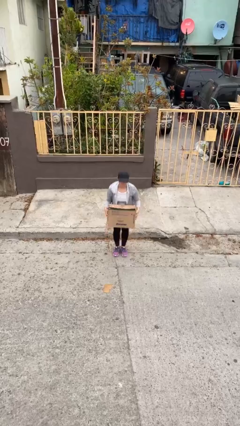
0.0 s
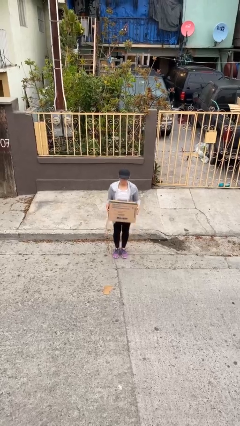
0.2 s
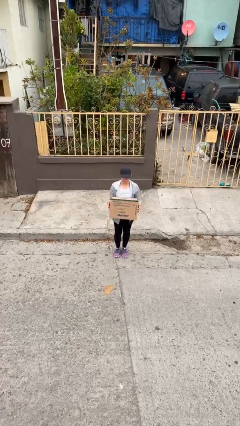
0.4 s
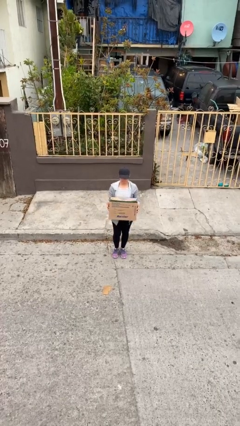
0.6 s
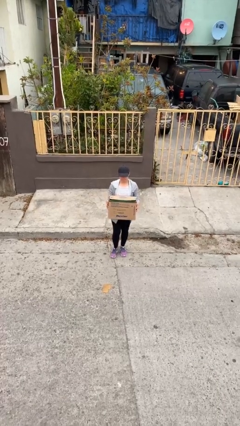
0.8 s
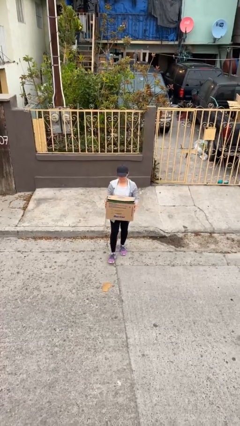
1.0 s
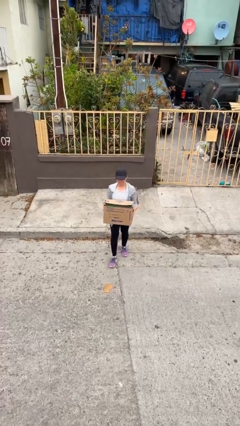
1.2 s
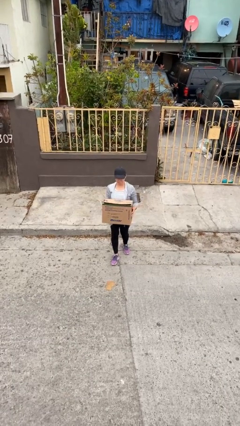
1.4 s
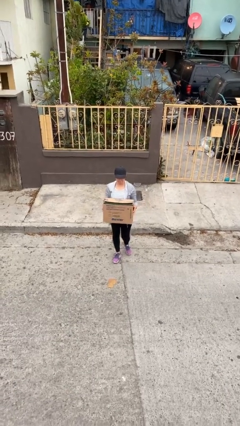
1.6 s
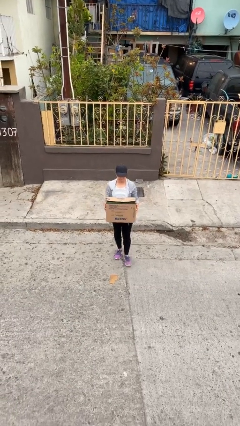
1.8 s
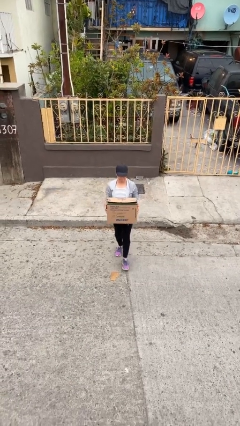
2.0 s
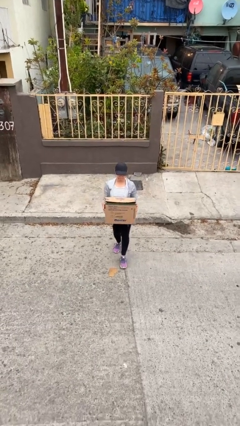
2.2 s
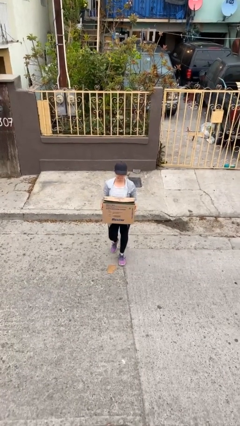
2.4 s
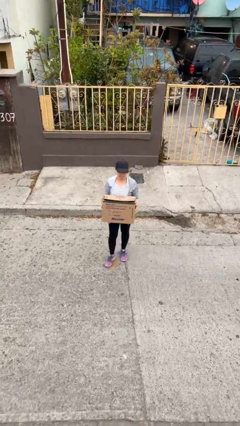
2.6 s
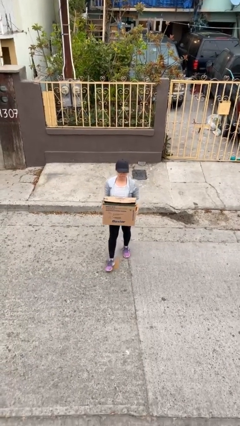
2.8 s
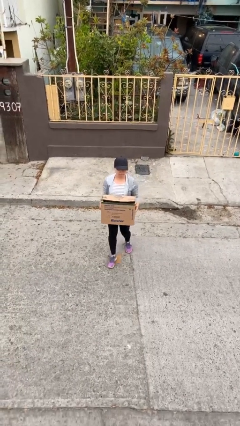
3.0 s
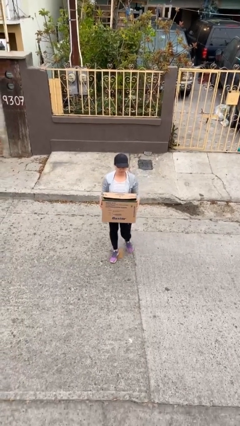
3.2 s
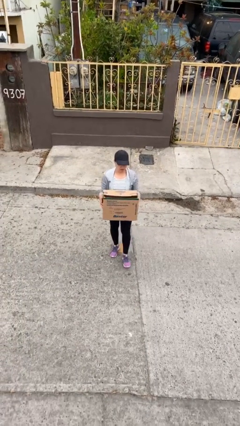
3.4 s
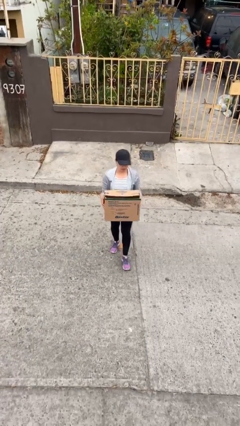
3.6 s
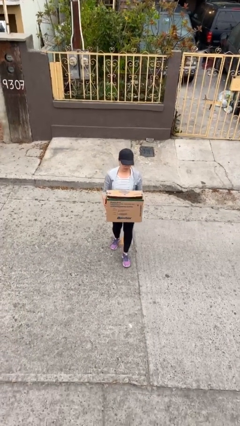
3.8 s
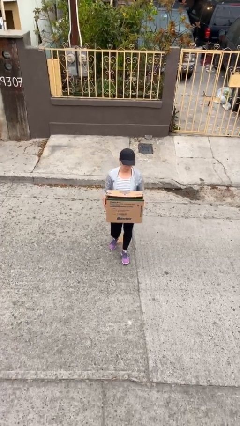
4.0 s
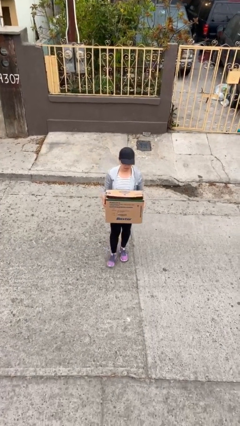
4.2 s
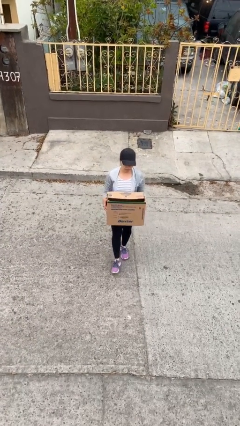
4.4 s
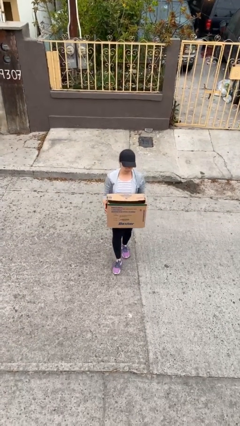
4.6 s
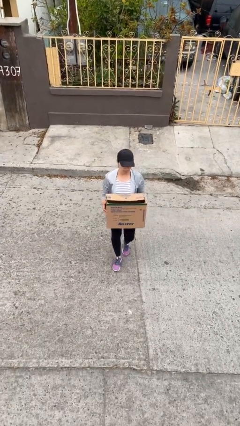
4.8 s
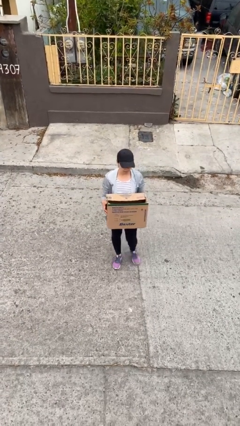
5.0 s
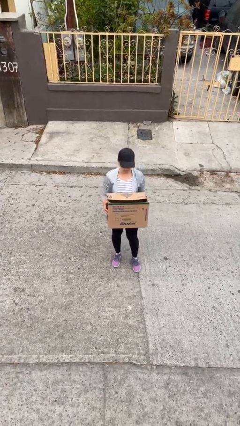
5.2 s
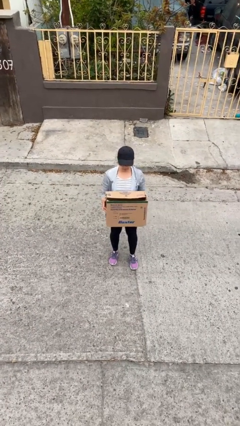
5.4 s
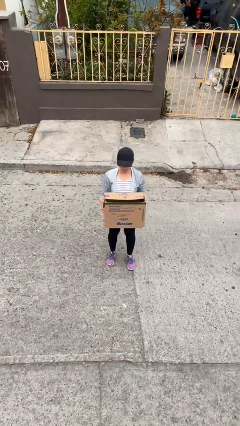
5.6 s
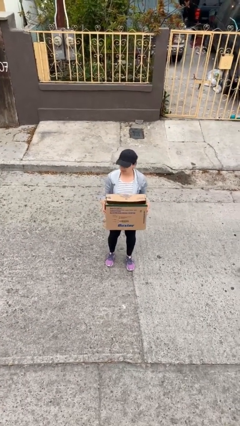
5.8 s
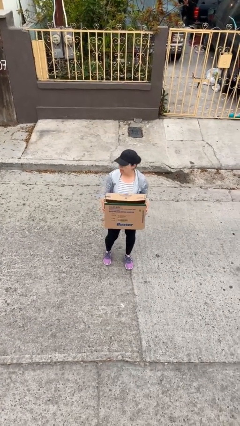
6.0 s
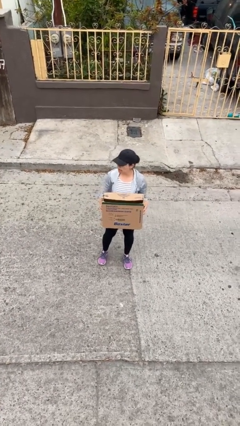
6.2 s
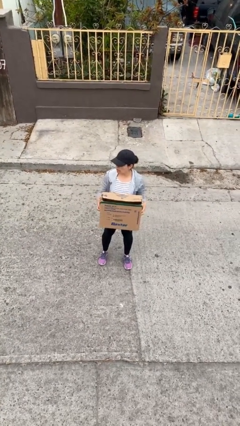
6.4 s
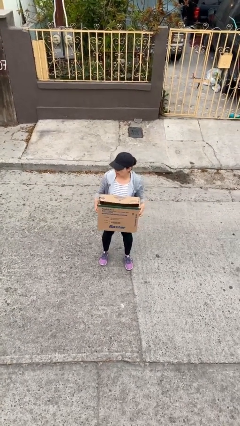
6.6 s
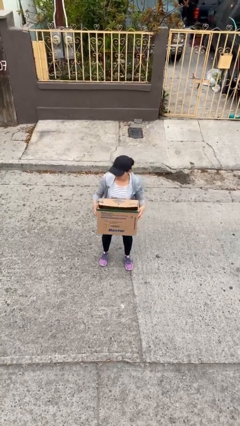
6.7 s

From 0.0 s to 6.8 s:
person carries heavy object

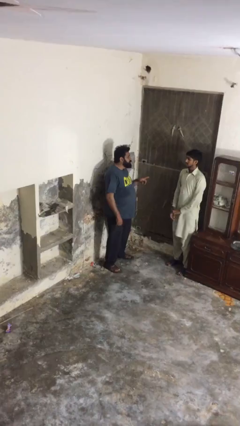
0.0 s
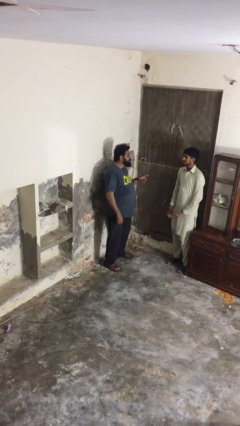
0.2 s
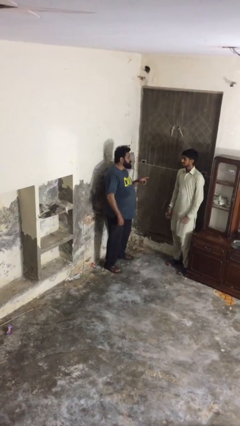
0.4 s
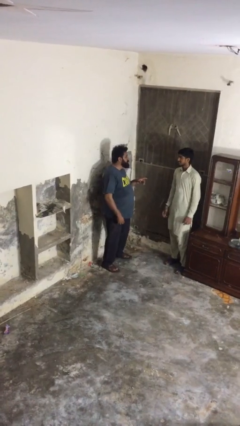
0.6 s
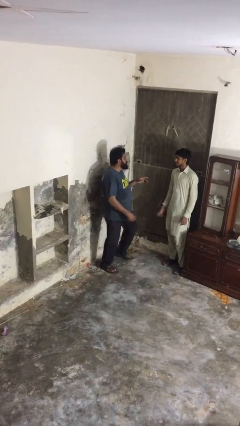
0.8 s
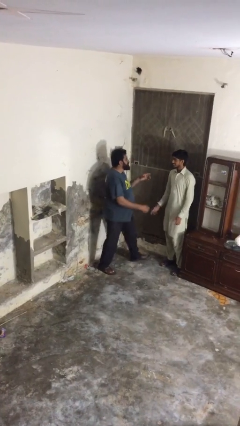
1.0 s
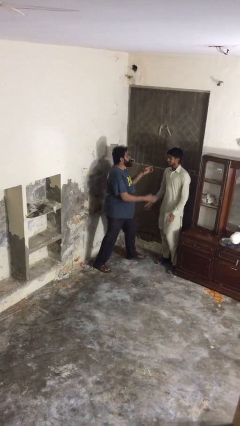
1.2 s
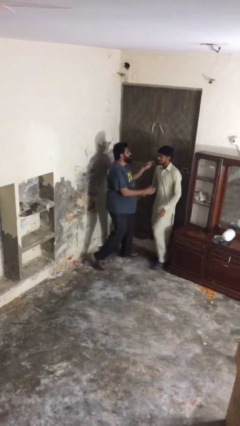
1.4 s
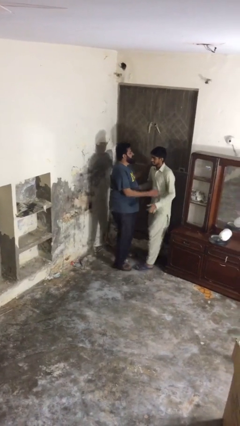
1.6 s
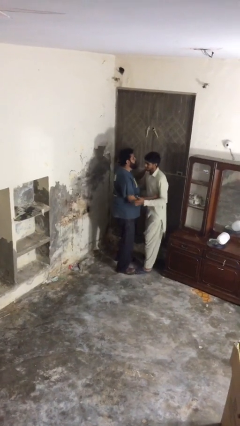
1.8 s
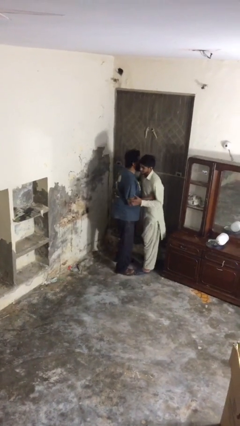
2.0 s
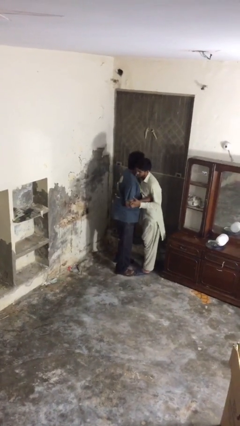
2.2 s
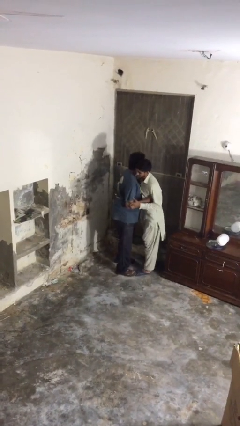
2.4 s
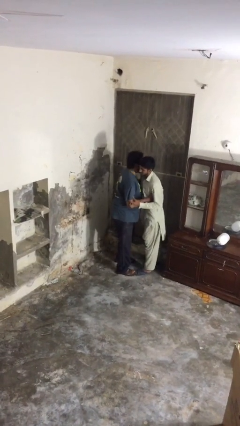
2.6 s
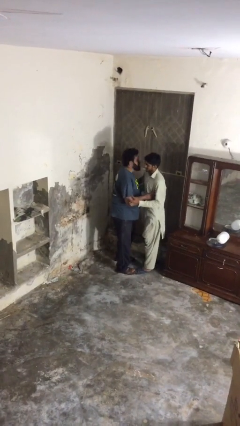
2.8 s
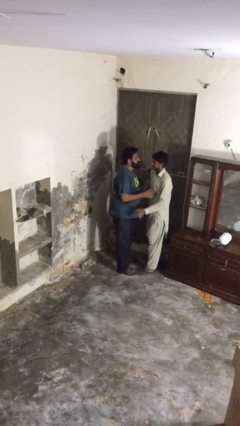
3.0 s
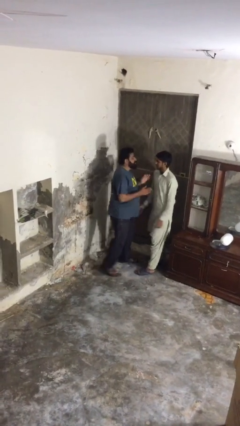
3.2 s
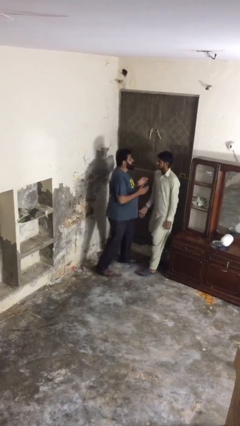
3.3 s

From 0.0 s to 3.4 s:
person embraces person

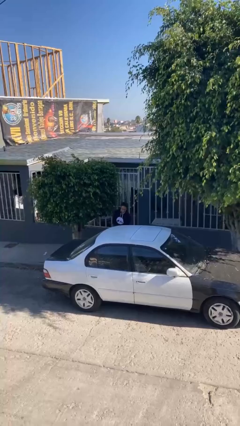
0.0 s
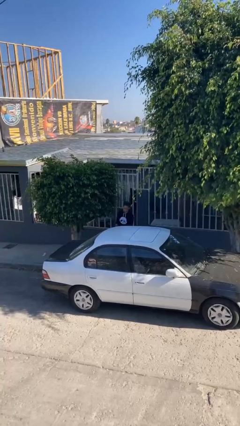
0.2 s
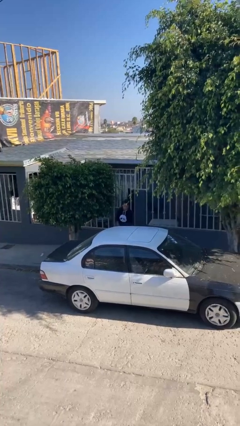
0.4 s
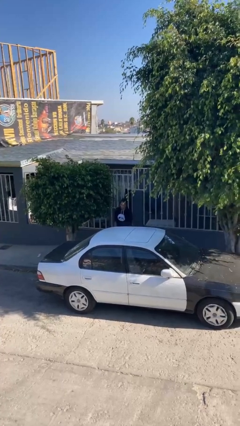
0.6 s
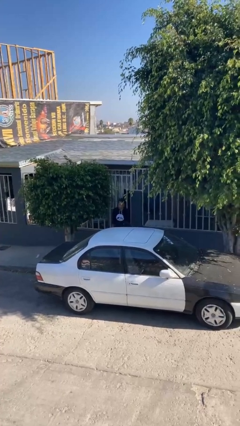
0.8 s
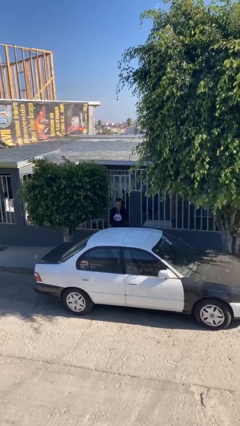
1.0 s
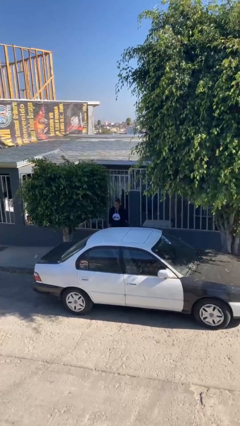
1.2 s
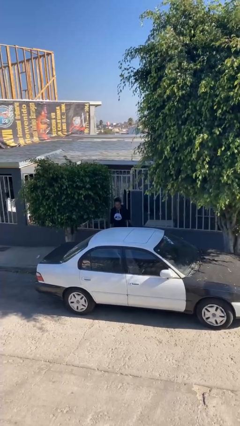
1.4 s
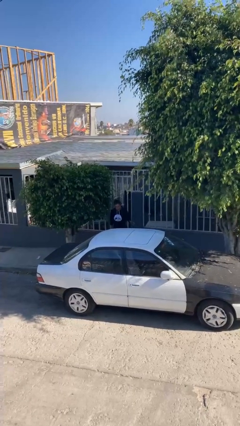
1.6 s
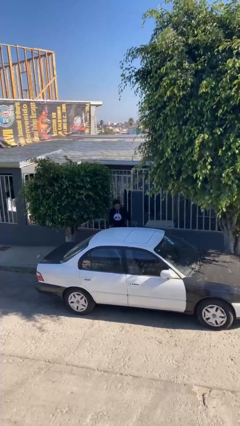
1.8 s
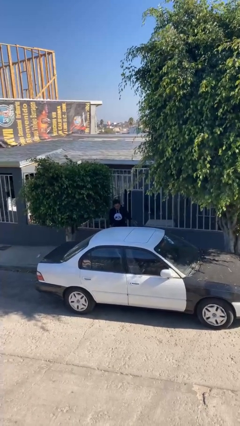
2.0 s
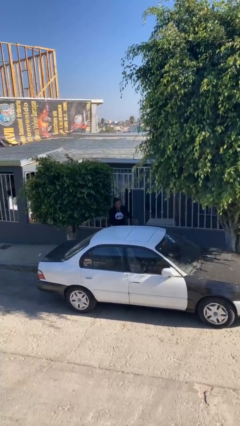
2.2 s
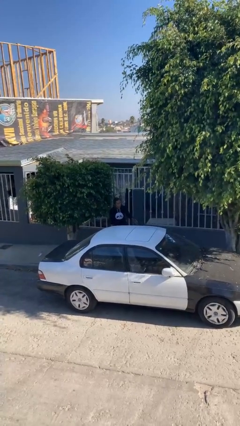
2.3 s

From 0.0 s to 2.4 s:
person opens car door

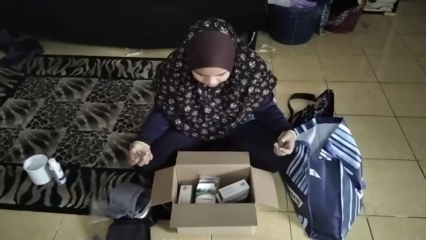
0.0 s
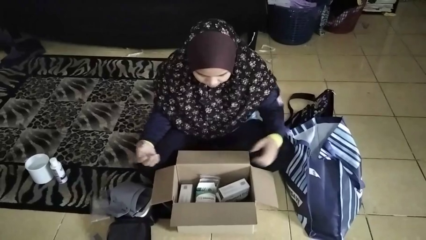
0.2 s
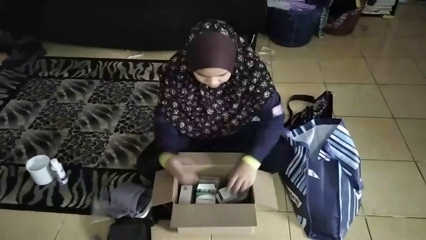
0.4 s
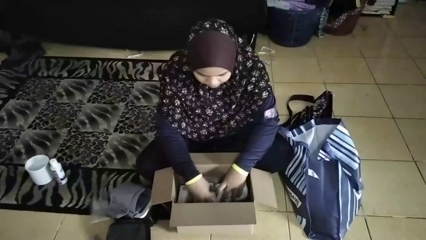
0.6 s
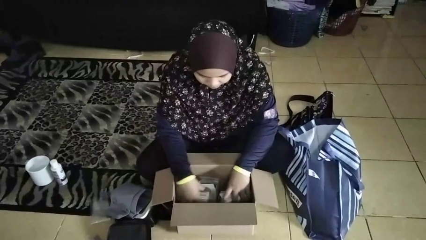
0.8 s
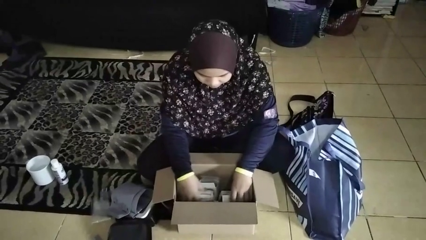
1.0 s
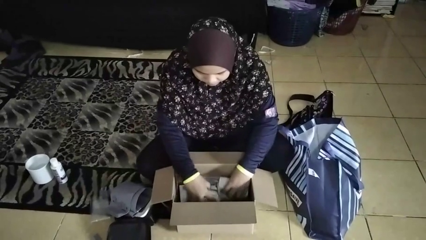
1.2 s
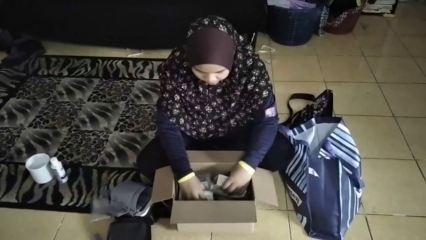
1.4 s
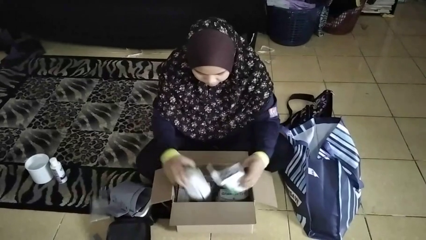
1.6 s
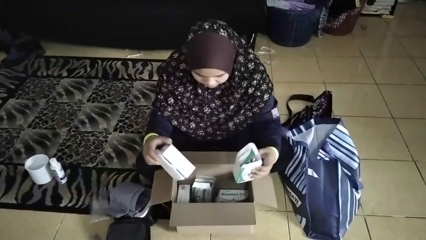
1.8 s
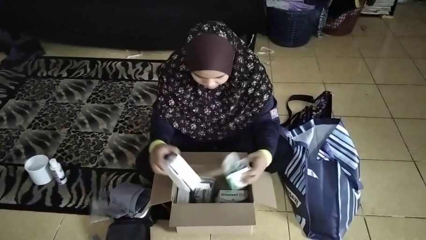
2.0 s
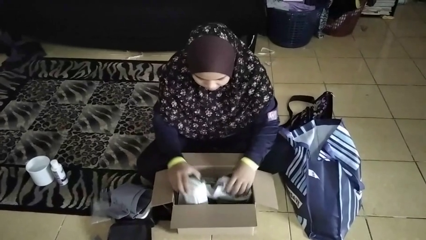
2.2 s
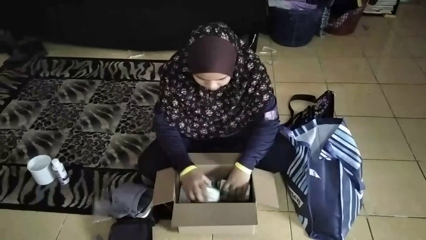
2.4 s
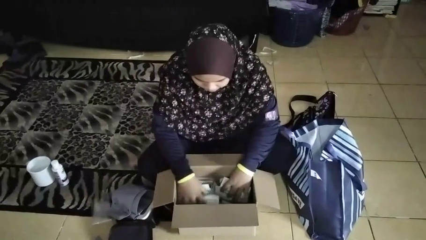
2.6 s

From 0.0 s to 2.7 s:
person searches in box

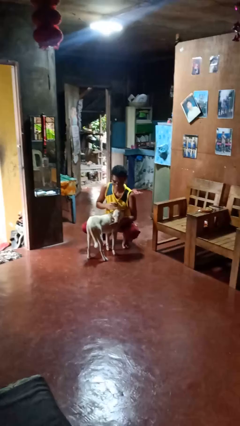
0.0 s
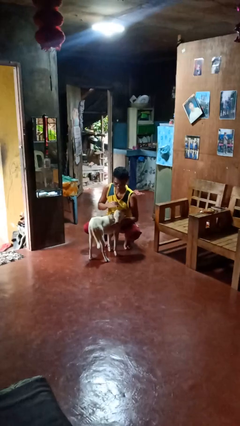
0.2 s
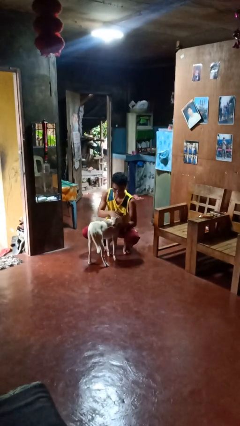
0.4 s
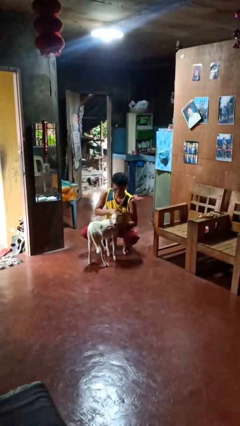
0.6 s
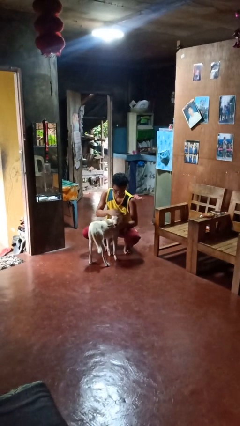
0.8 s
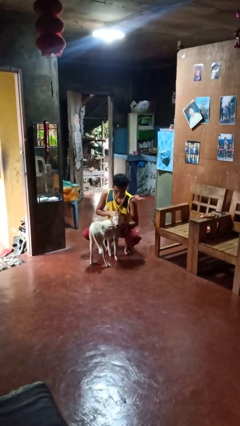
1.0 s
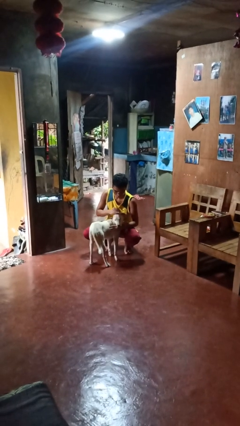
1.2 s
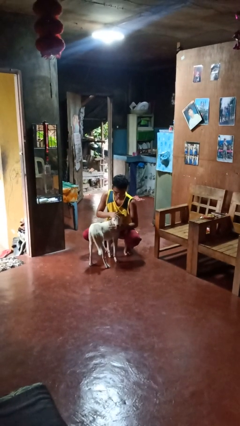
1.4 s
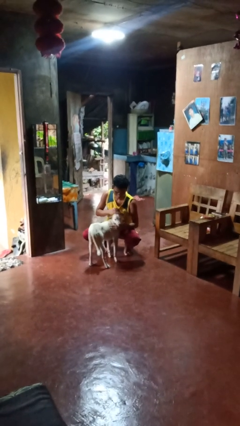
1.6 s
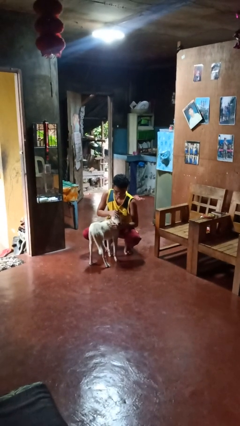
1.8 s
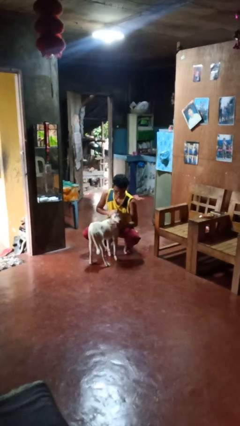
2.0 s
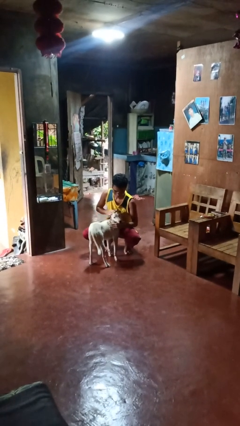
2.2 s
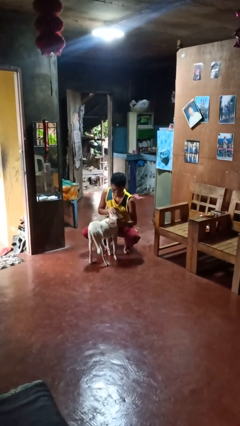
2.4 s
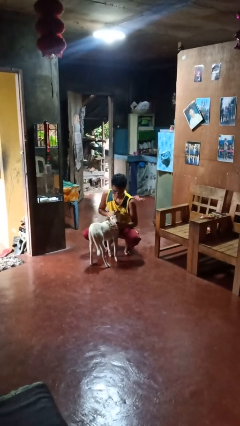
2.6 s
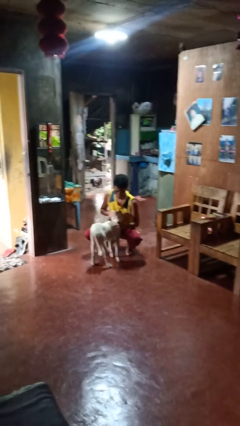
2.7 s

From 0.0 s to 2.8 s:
person pets dog
